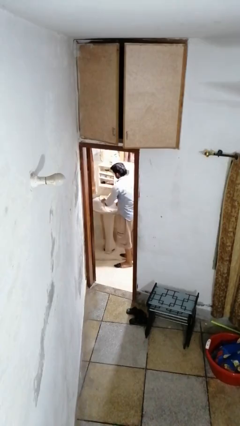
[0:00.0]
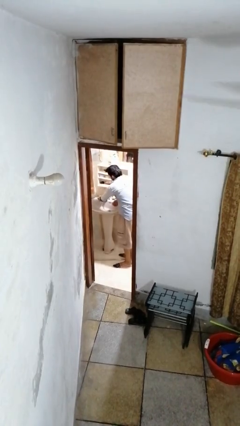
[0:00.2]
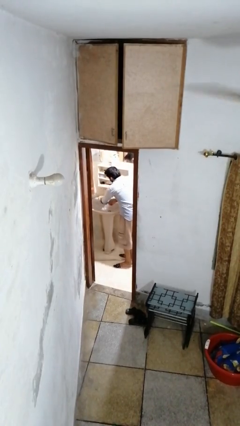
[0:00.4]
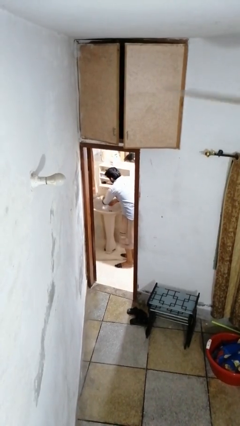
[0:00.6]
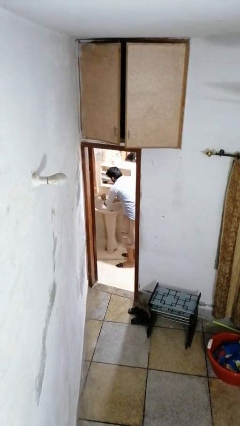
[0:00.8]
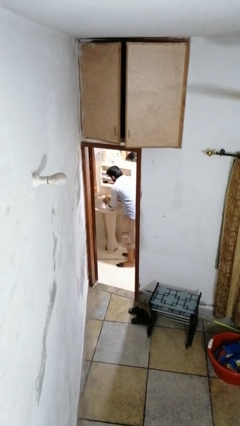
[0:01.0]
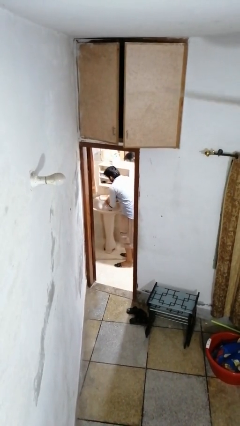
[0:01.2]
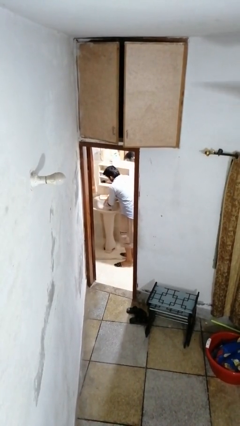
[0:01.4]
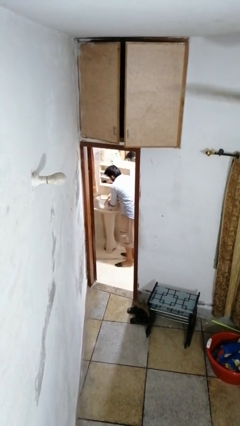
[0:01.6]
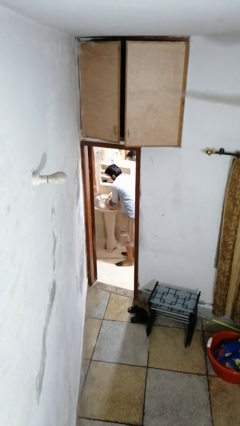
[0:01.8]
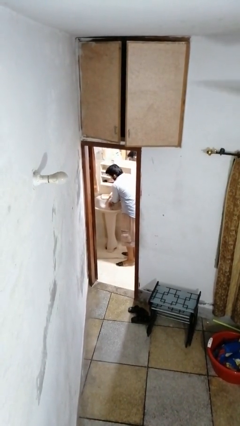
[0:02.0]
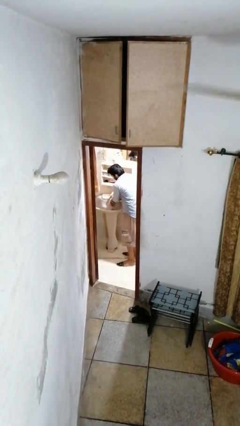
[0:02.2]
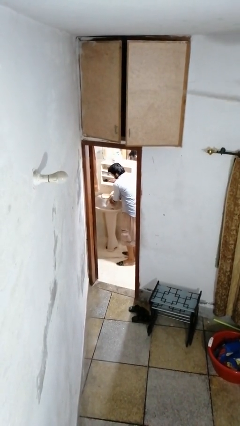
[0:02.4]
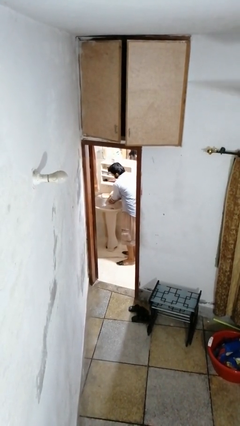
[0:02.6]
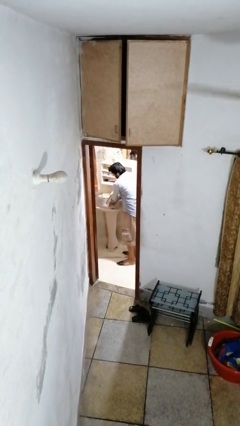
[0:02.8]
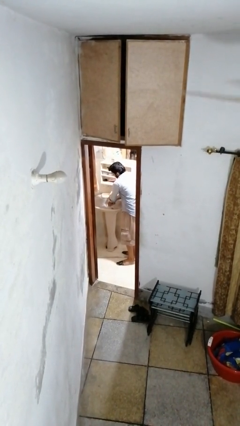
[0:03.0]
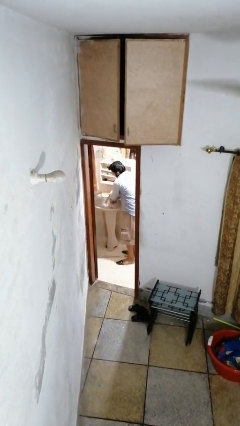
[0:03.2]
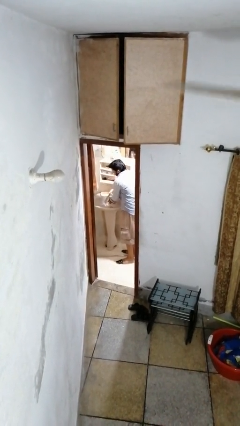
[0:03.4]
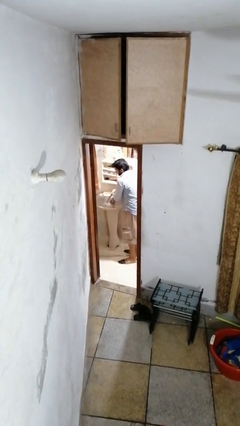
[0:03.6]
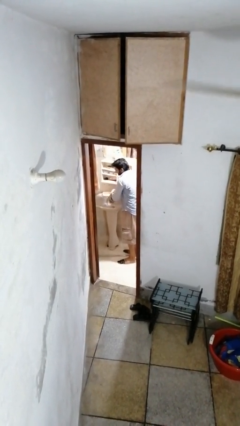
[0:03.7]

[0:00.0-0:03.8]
person washes hands

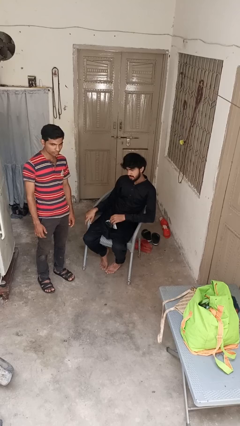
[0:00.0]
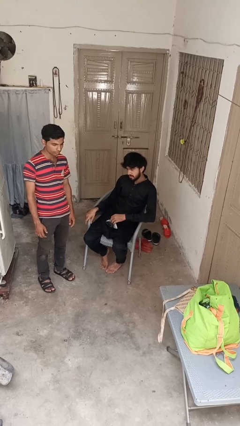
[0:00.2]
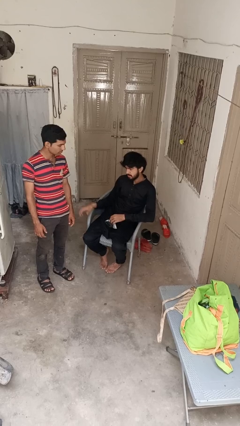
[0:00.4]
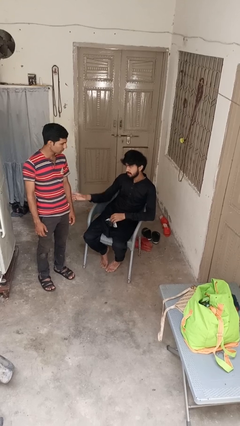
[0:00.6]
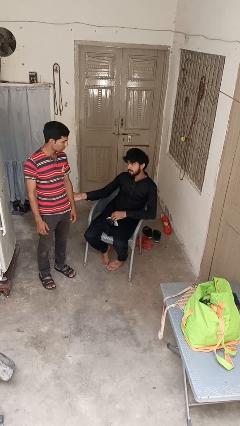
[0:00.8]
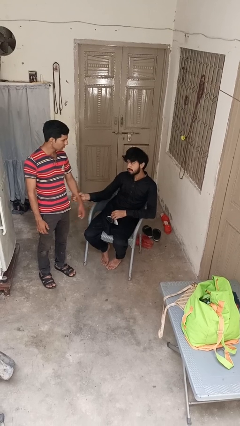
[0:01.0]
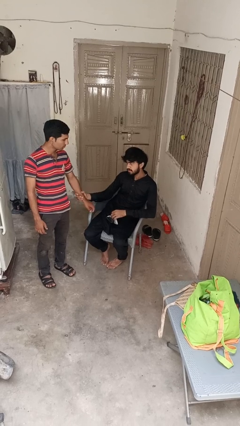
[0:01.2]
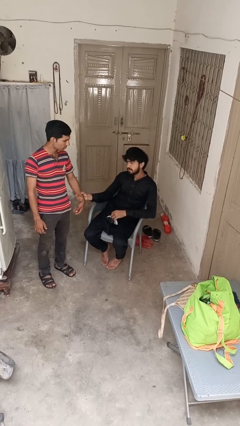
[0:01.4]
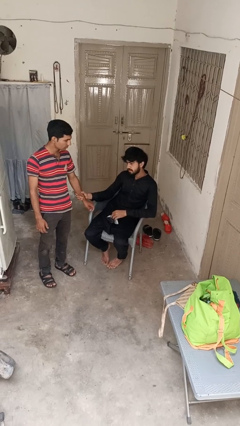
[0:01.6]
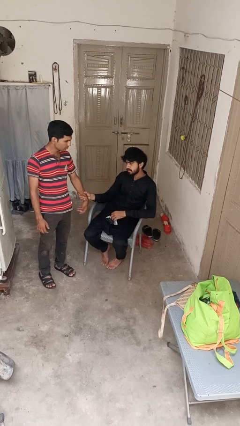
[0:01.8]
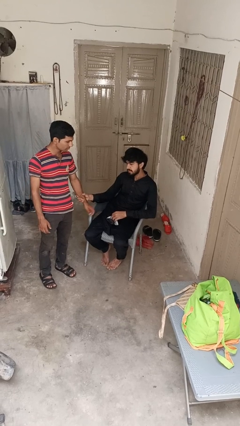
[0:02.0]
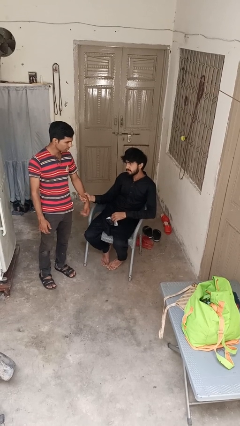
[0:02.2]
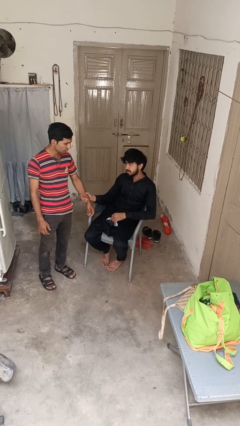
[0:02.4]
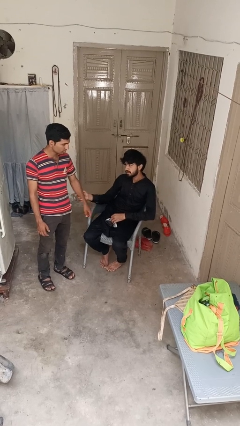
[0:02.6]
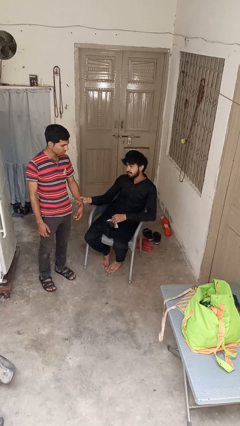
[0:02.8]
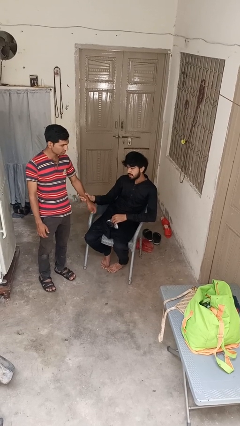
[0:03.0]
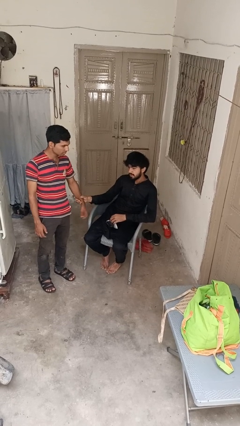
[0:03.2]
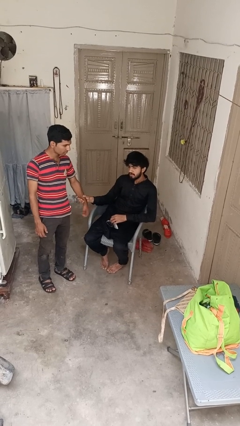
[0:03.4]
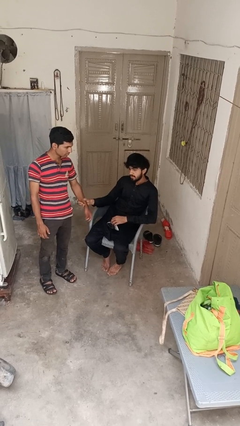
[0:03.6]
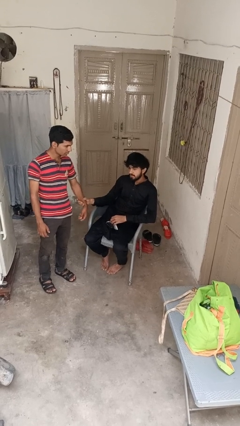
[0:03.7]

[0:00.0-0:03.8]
person grabs person by forearm

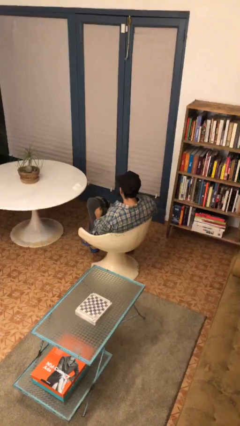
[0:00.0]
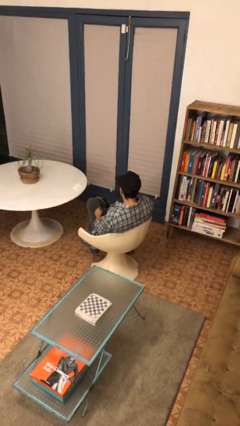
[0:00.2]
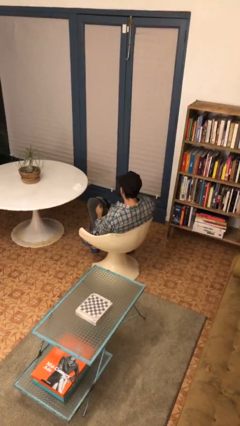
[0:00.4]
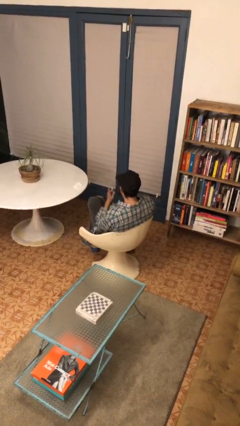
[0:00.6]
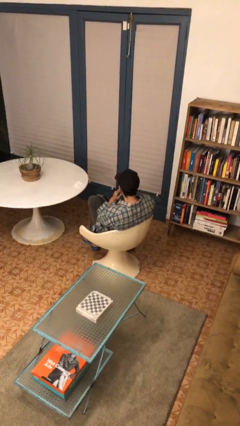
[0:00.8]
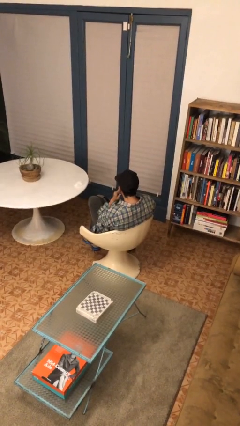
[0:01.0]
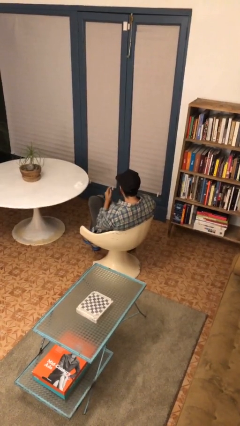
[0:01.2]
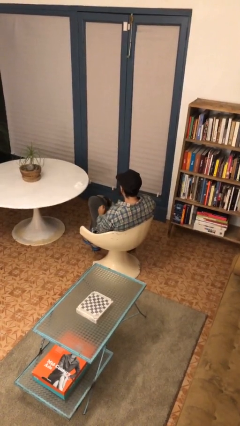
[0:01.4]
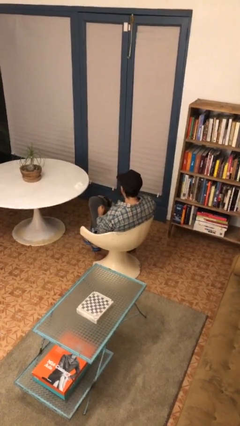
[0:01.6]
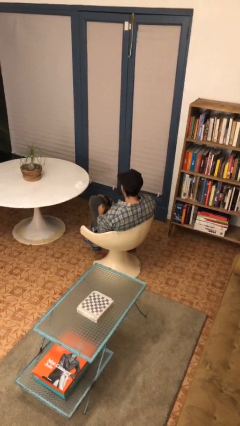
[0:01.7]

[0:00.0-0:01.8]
person gestures listen closely

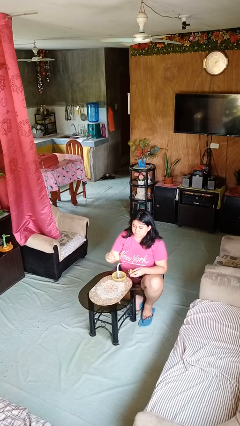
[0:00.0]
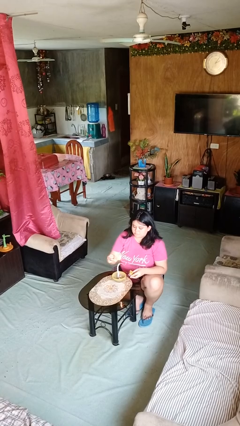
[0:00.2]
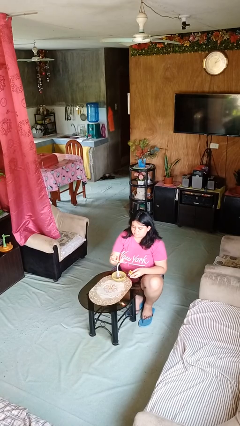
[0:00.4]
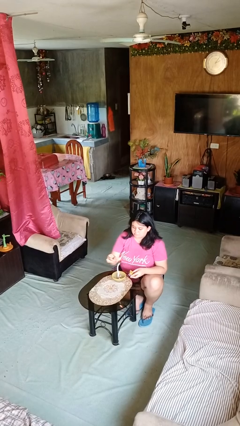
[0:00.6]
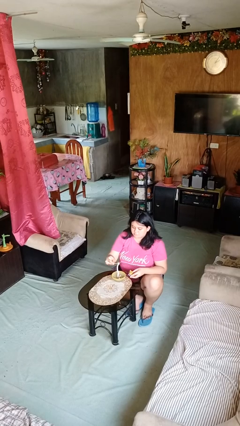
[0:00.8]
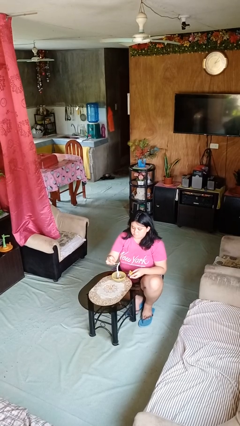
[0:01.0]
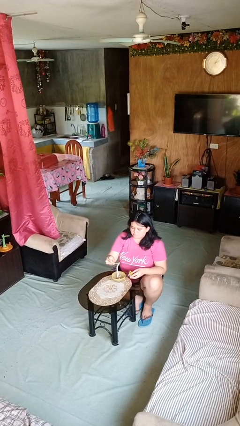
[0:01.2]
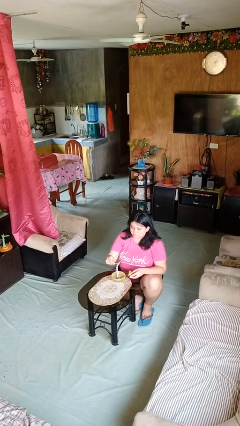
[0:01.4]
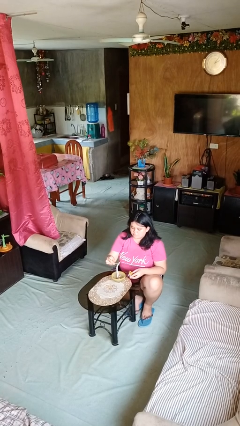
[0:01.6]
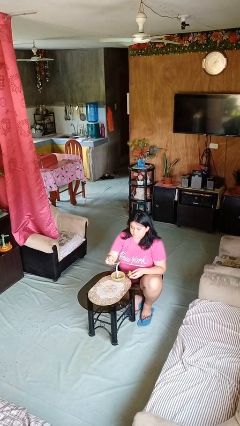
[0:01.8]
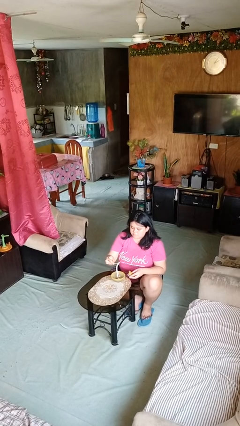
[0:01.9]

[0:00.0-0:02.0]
person lights candle

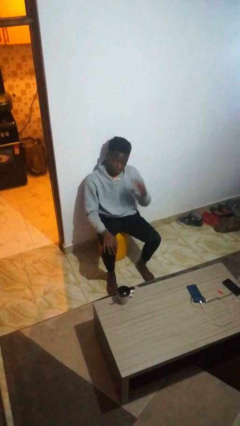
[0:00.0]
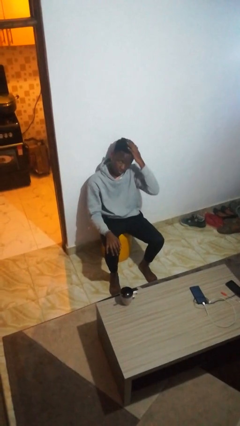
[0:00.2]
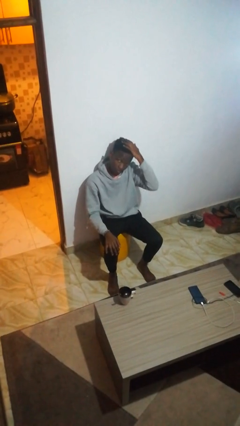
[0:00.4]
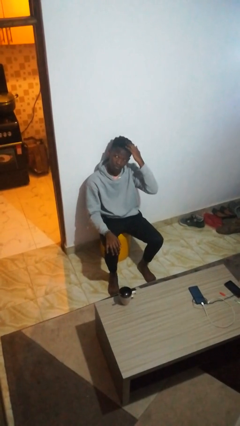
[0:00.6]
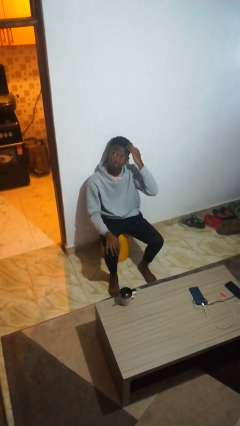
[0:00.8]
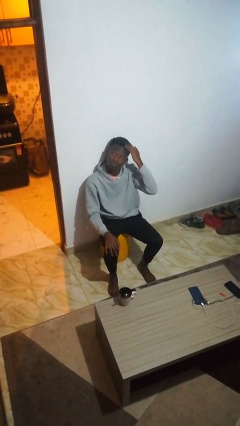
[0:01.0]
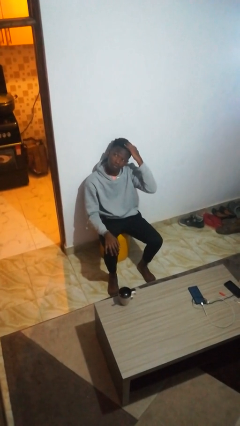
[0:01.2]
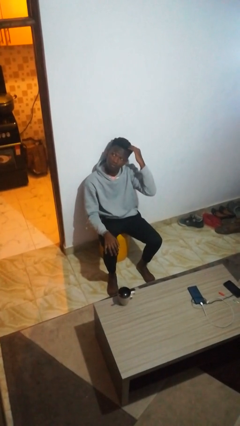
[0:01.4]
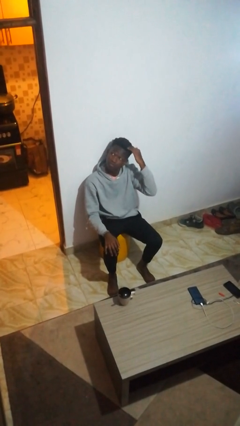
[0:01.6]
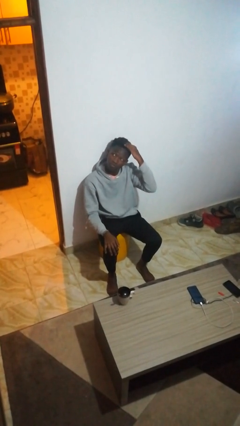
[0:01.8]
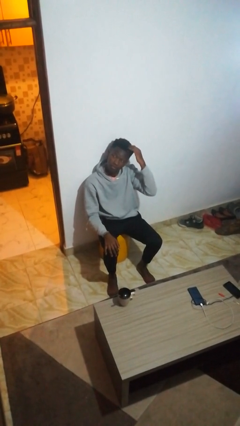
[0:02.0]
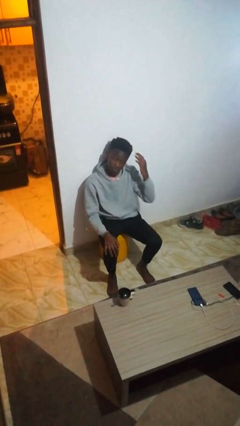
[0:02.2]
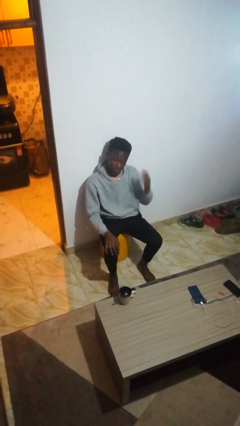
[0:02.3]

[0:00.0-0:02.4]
person strokes hair

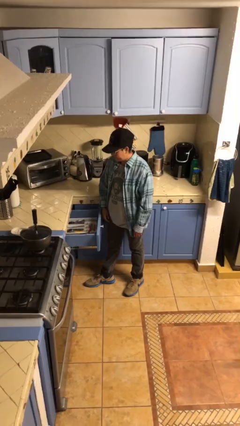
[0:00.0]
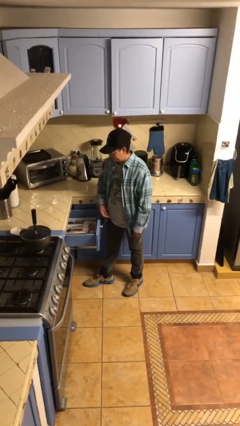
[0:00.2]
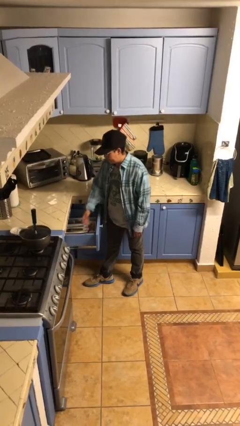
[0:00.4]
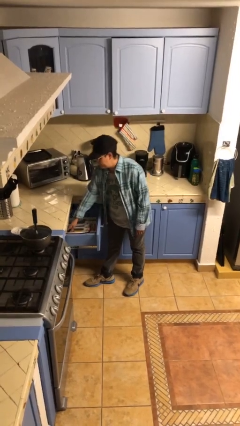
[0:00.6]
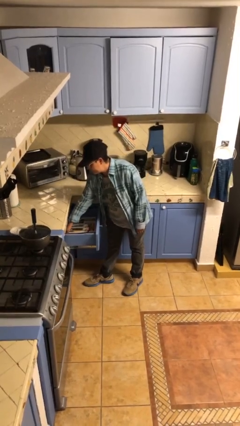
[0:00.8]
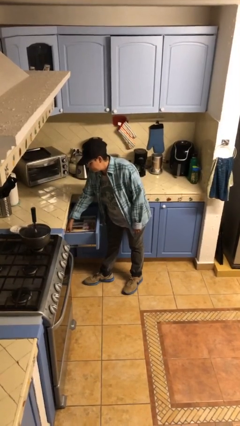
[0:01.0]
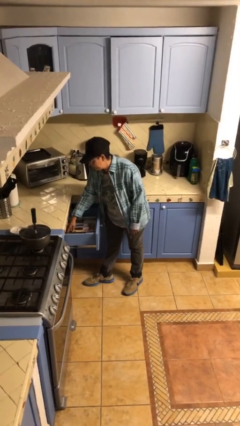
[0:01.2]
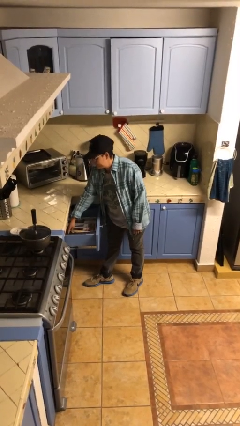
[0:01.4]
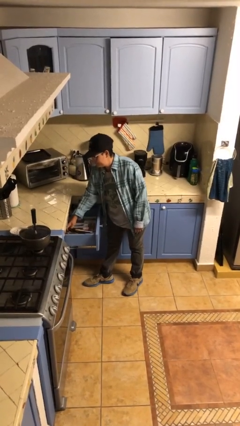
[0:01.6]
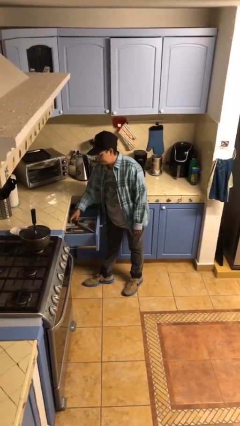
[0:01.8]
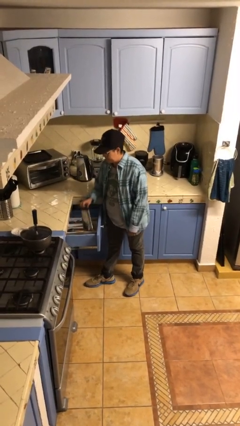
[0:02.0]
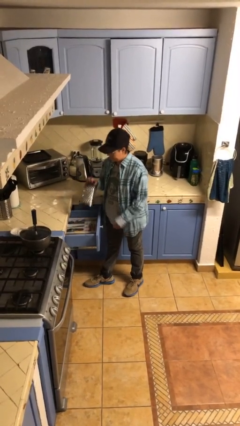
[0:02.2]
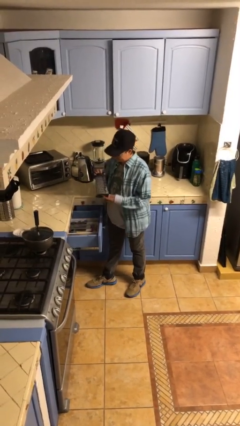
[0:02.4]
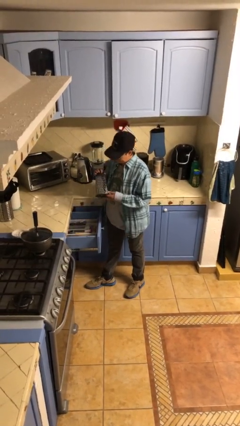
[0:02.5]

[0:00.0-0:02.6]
person takes object from kitchen drawer

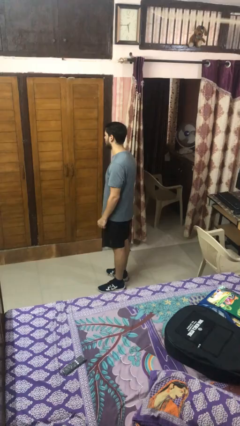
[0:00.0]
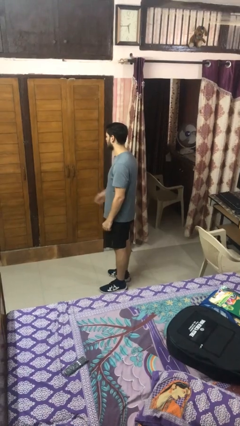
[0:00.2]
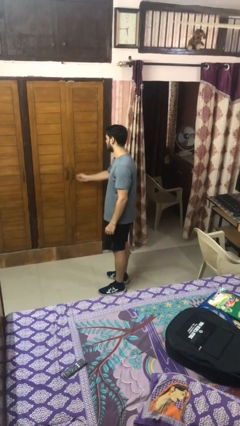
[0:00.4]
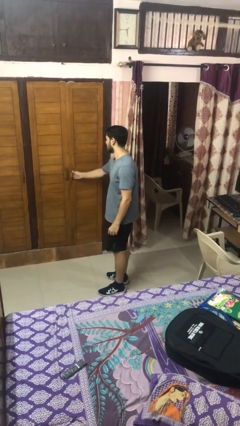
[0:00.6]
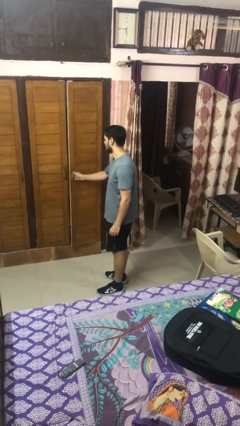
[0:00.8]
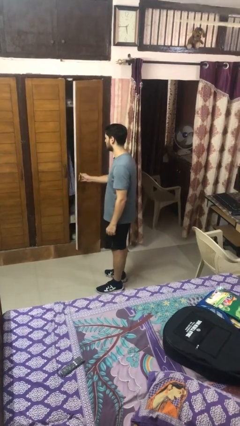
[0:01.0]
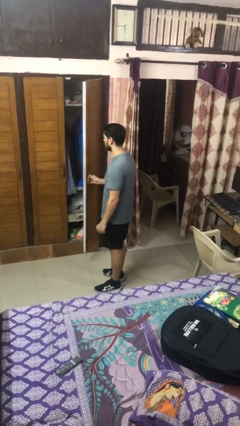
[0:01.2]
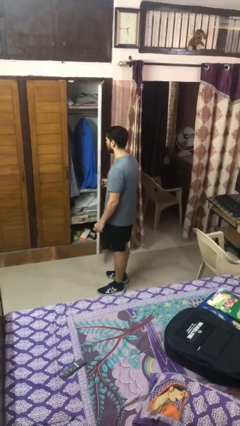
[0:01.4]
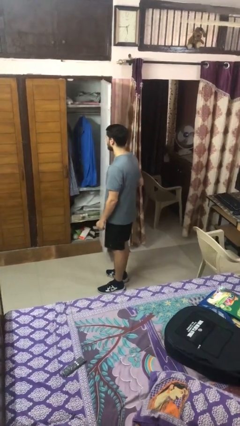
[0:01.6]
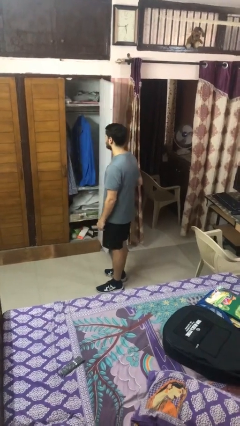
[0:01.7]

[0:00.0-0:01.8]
person opens closet door
